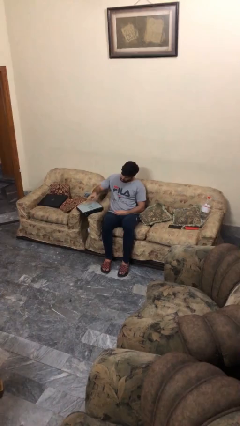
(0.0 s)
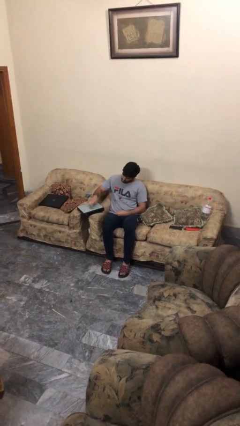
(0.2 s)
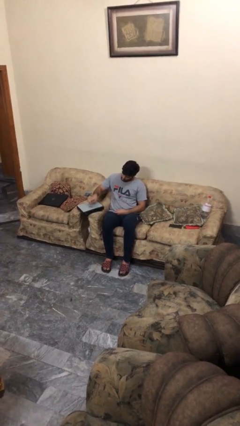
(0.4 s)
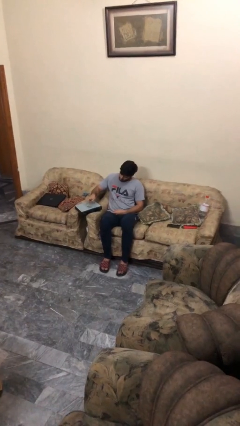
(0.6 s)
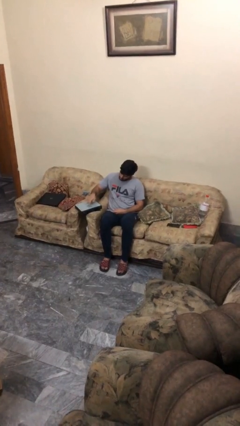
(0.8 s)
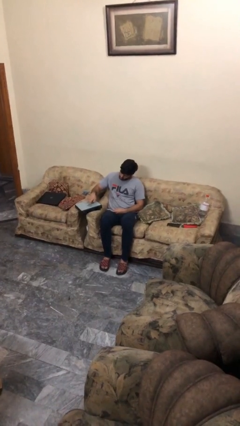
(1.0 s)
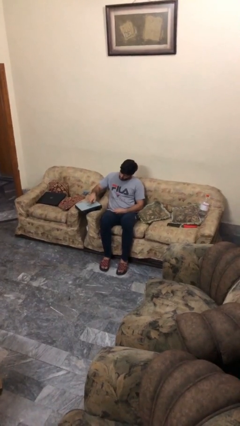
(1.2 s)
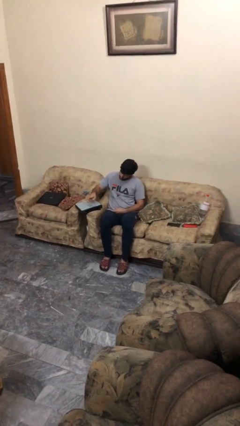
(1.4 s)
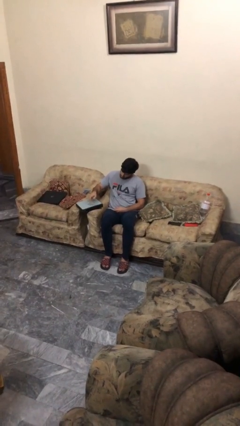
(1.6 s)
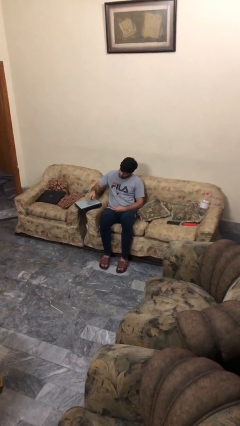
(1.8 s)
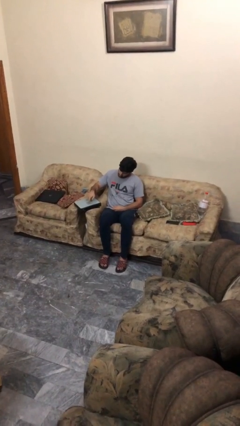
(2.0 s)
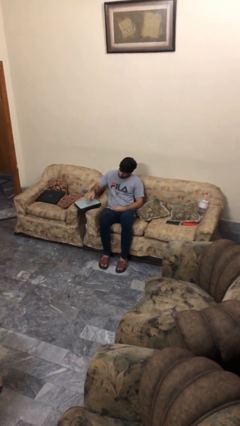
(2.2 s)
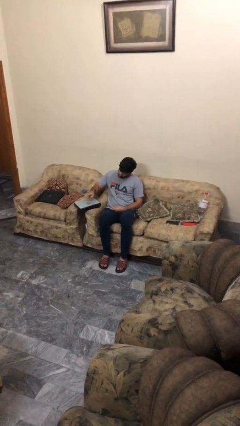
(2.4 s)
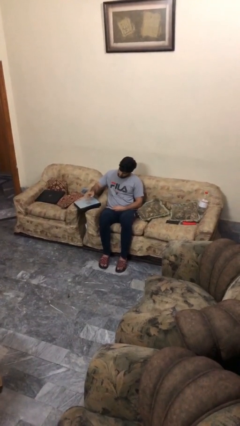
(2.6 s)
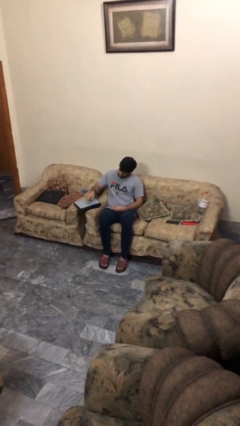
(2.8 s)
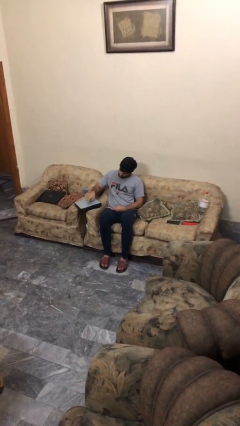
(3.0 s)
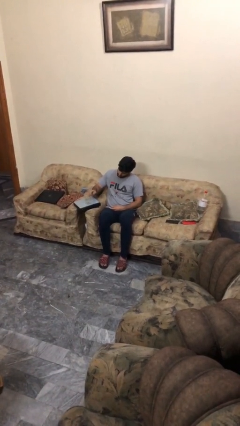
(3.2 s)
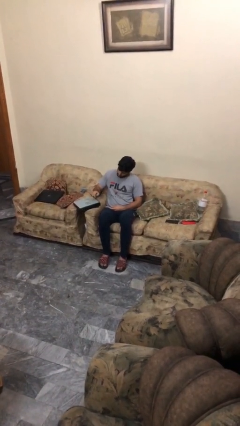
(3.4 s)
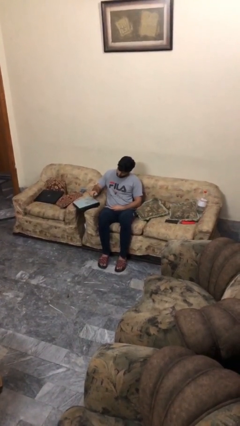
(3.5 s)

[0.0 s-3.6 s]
person taps object with finger

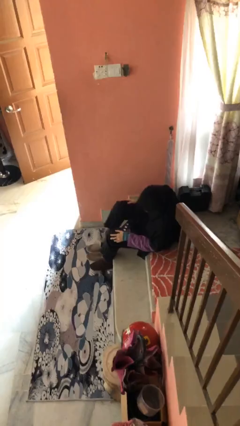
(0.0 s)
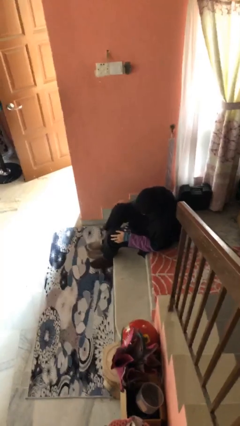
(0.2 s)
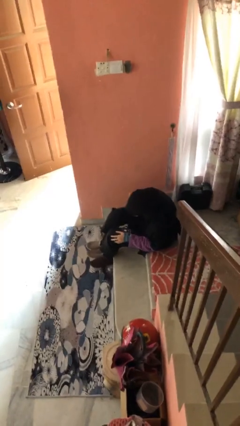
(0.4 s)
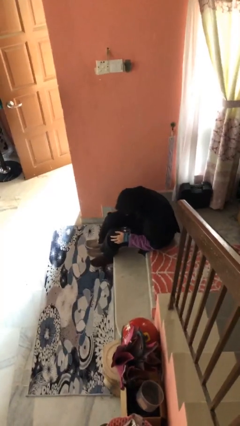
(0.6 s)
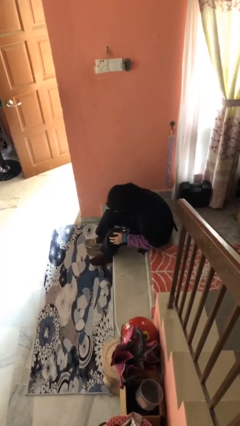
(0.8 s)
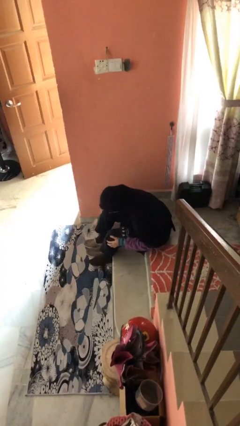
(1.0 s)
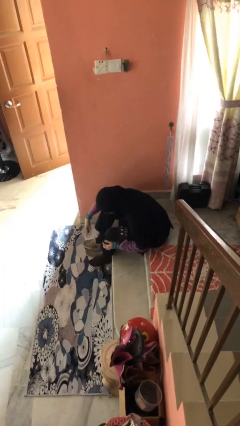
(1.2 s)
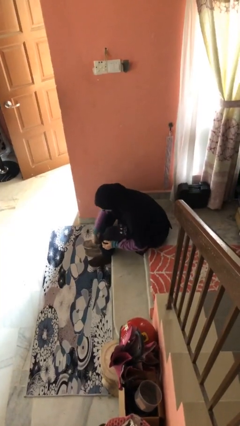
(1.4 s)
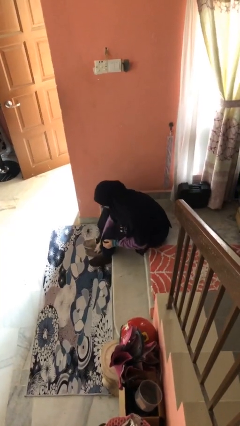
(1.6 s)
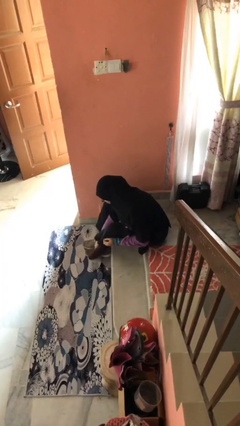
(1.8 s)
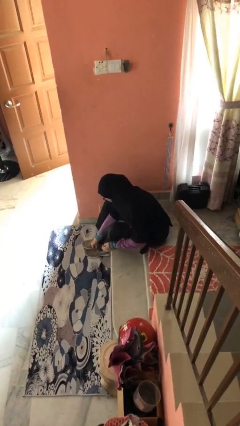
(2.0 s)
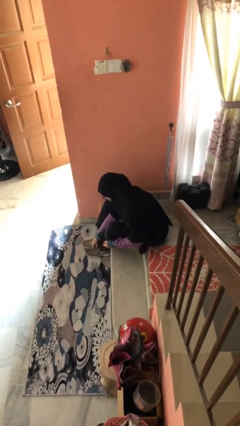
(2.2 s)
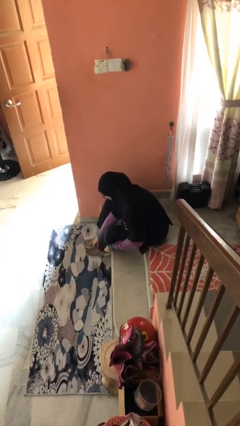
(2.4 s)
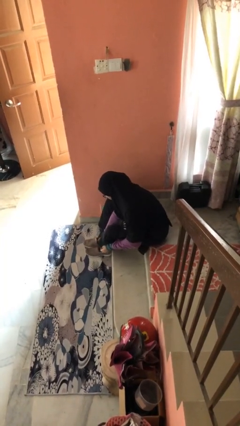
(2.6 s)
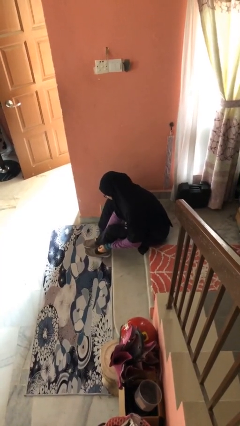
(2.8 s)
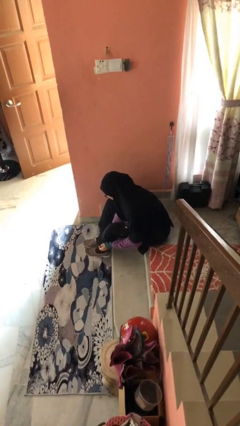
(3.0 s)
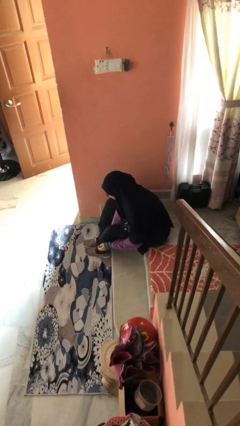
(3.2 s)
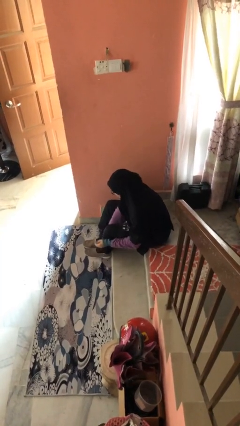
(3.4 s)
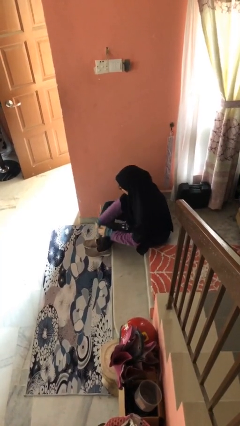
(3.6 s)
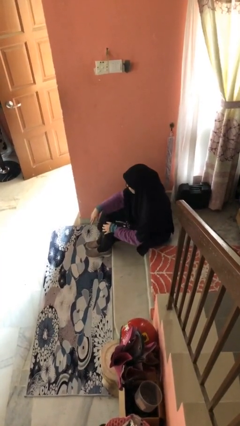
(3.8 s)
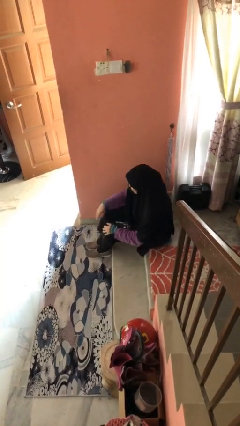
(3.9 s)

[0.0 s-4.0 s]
person puts on shoes

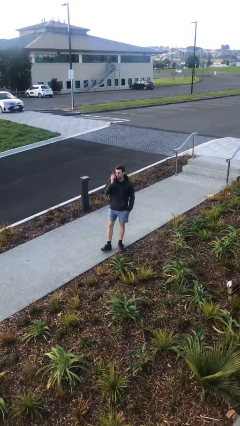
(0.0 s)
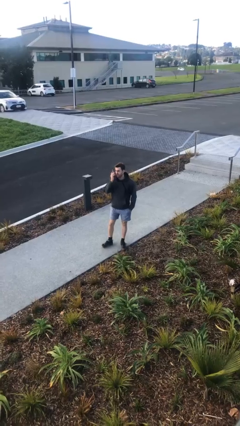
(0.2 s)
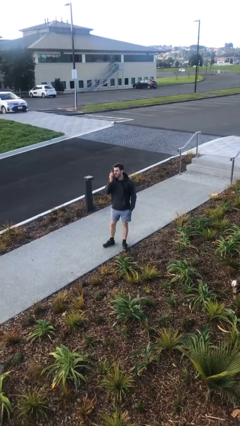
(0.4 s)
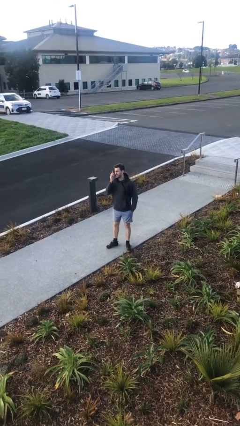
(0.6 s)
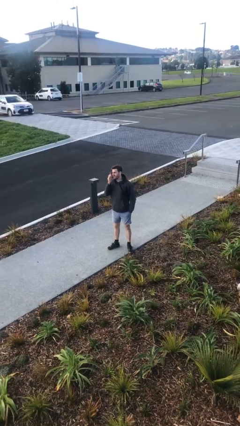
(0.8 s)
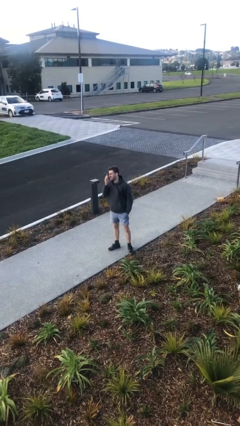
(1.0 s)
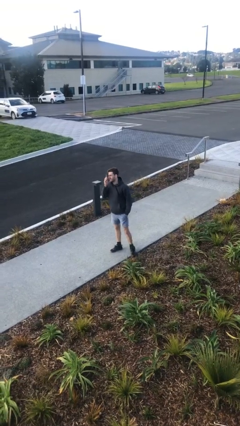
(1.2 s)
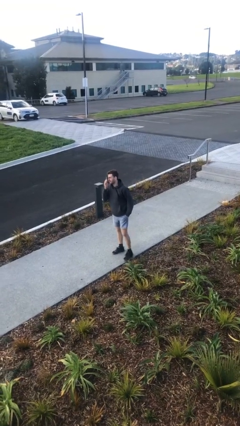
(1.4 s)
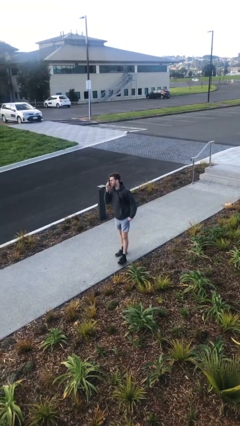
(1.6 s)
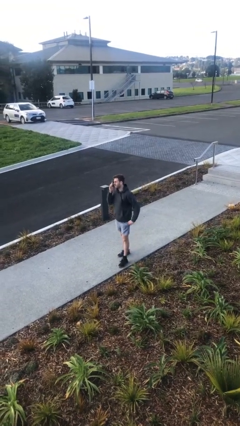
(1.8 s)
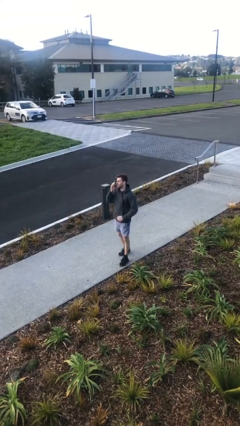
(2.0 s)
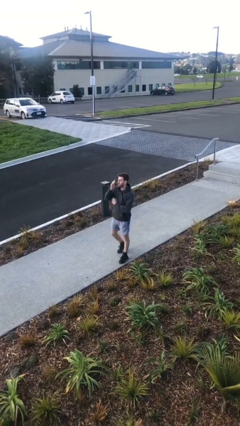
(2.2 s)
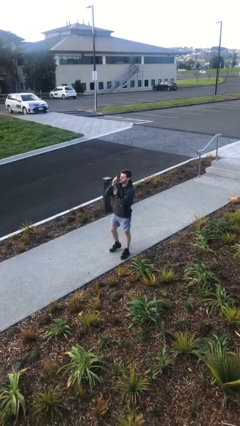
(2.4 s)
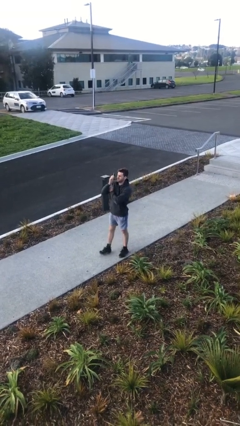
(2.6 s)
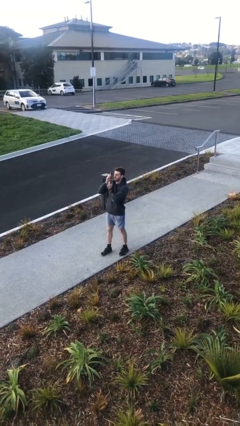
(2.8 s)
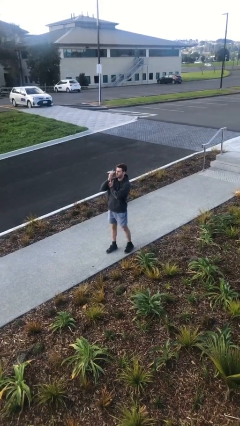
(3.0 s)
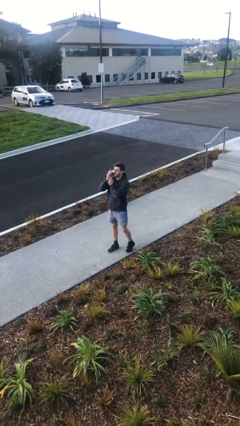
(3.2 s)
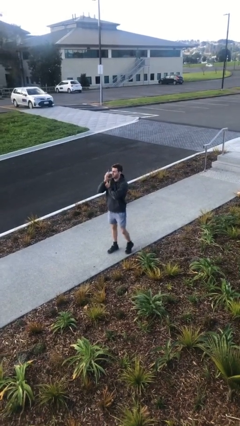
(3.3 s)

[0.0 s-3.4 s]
person talks on phone

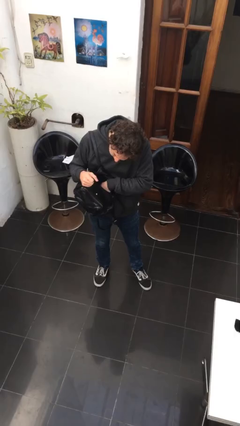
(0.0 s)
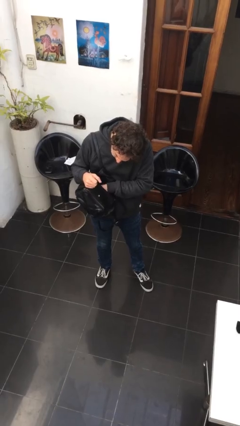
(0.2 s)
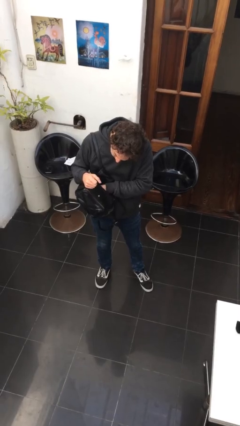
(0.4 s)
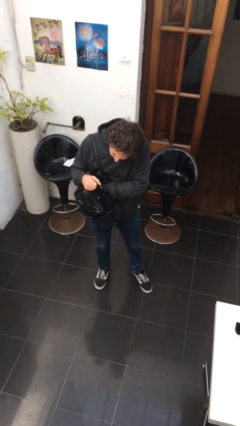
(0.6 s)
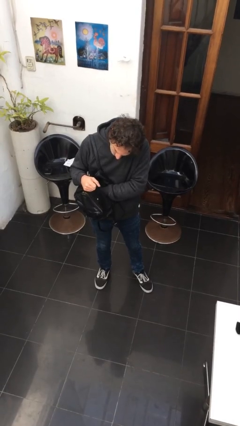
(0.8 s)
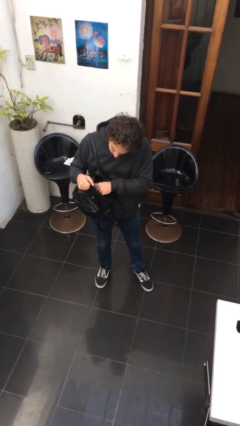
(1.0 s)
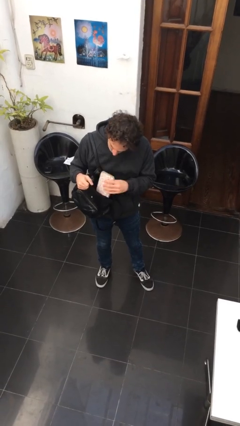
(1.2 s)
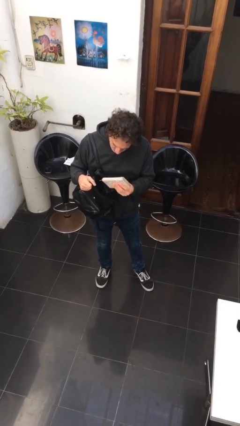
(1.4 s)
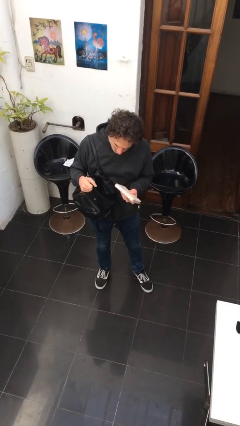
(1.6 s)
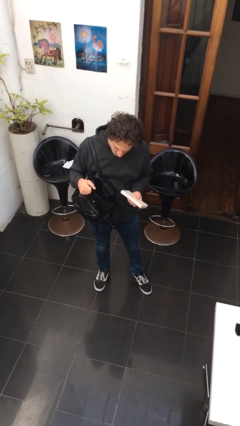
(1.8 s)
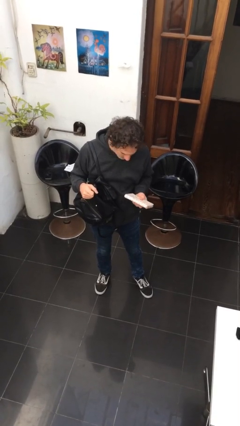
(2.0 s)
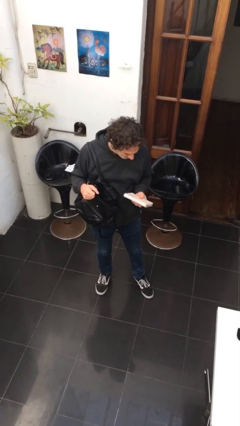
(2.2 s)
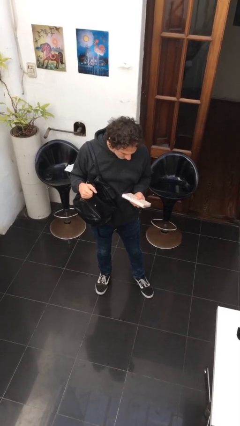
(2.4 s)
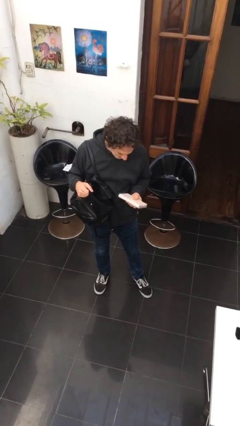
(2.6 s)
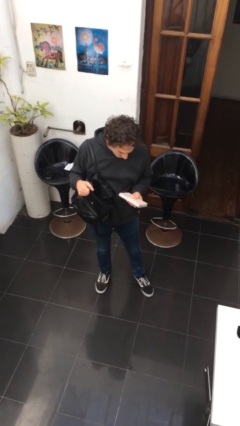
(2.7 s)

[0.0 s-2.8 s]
person takes object from purse

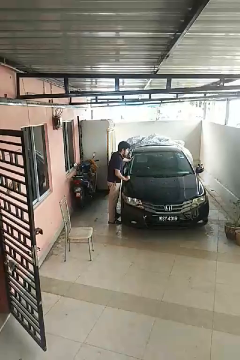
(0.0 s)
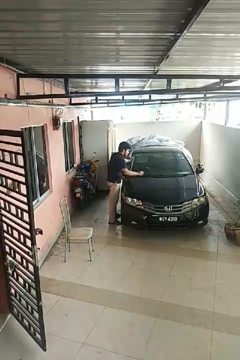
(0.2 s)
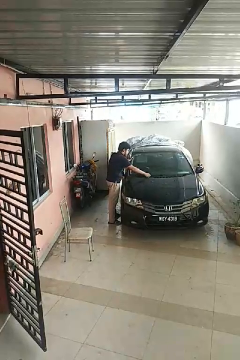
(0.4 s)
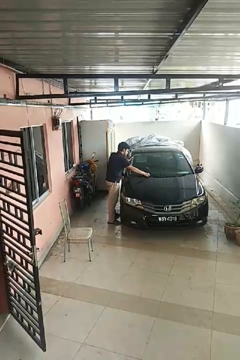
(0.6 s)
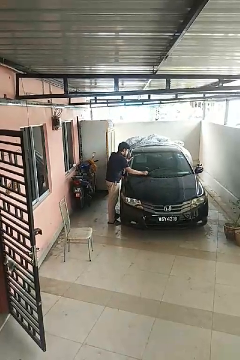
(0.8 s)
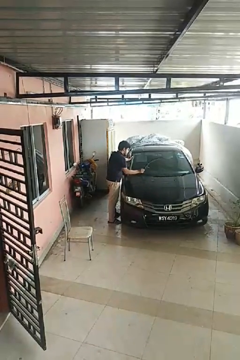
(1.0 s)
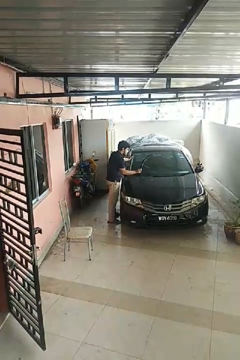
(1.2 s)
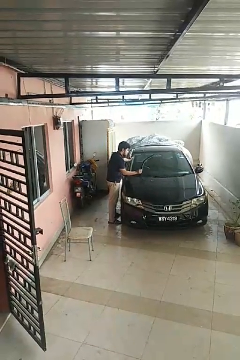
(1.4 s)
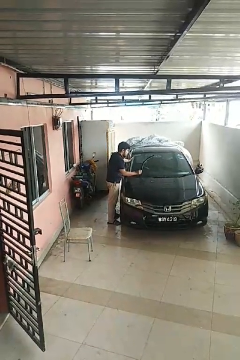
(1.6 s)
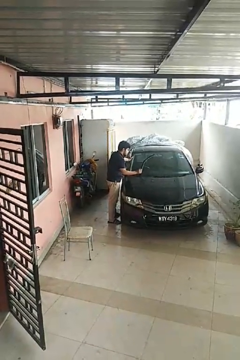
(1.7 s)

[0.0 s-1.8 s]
person flips up car wipers

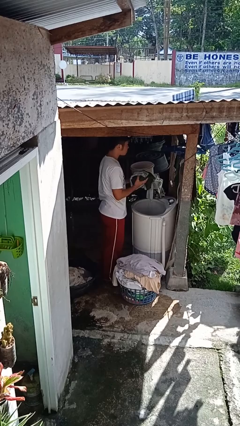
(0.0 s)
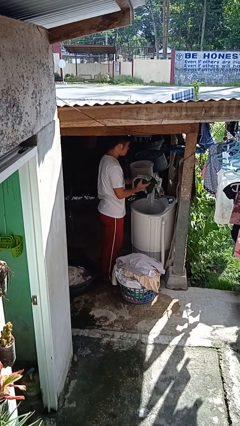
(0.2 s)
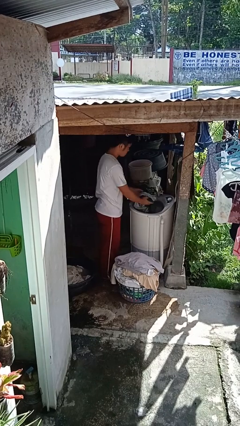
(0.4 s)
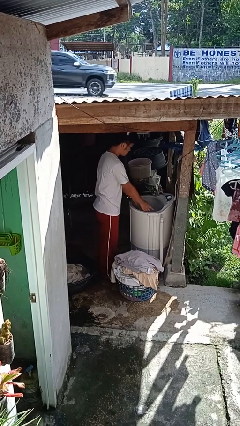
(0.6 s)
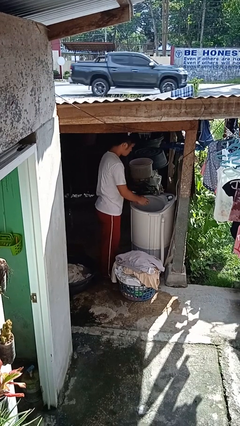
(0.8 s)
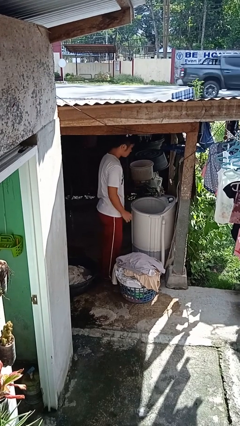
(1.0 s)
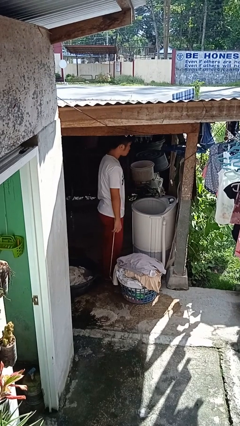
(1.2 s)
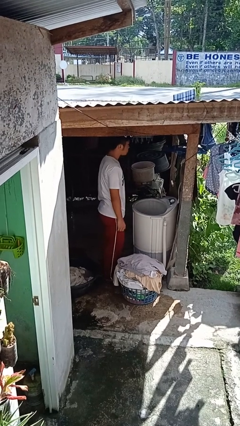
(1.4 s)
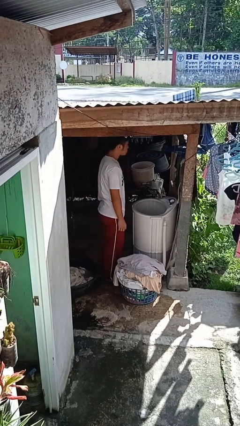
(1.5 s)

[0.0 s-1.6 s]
person loads clotheswasher

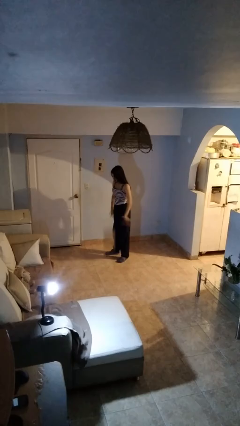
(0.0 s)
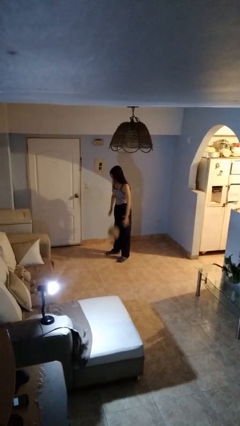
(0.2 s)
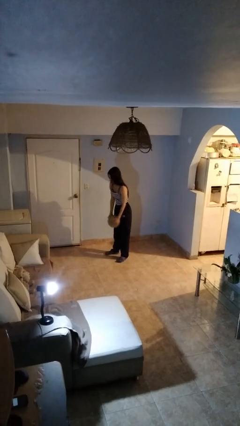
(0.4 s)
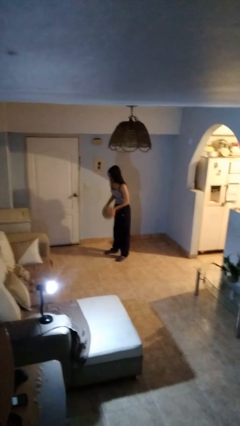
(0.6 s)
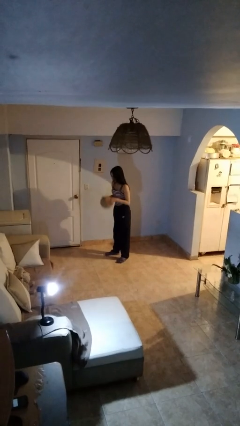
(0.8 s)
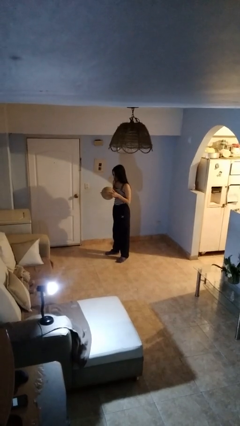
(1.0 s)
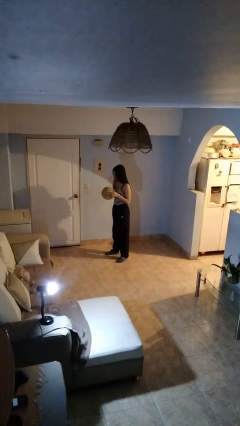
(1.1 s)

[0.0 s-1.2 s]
person bounces ball on floor
